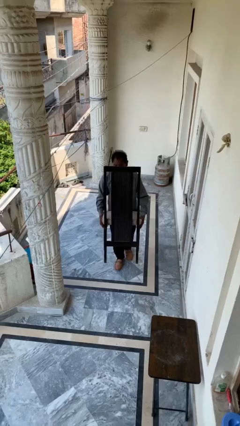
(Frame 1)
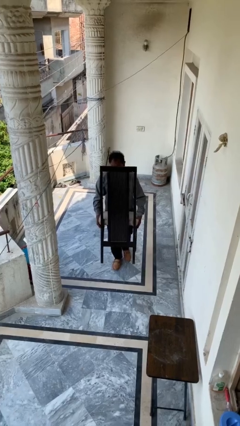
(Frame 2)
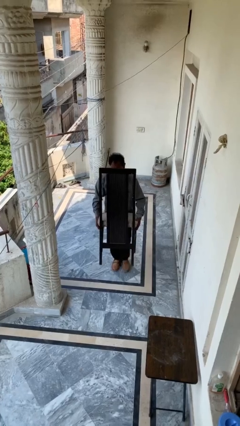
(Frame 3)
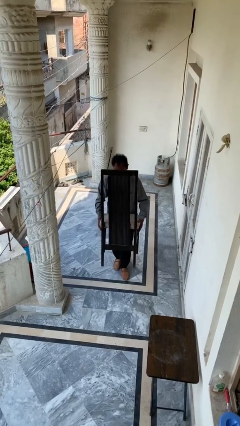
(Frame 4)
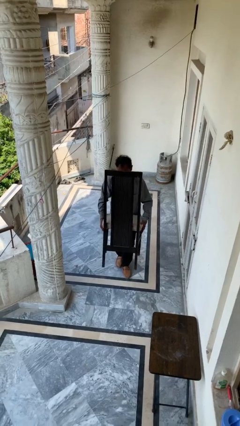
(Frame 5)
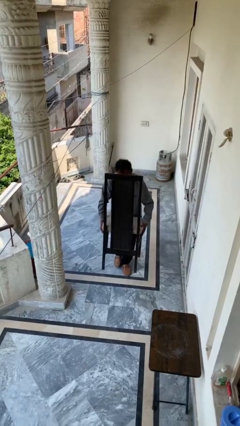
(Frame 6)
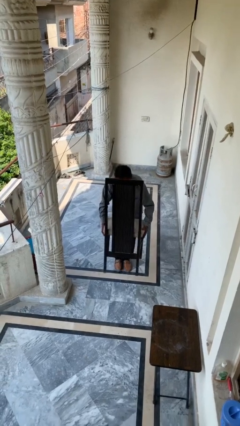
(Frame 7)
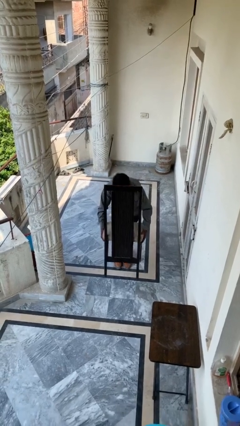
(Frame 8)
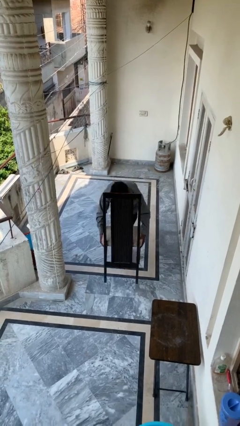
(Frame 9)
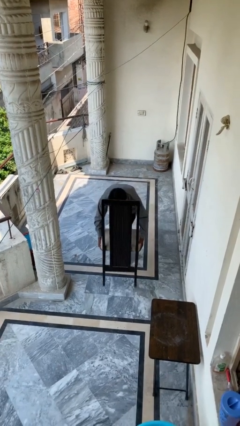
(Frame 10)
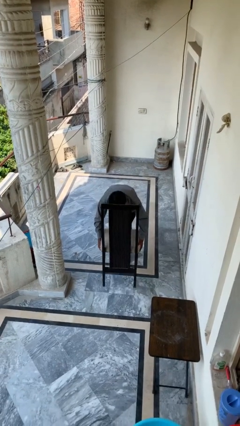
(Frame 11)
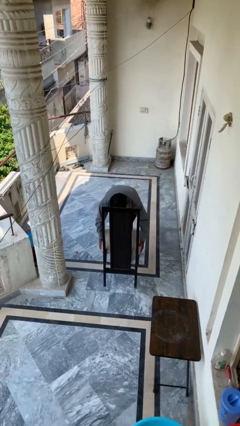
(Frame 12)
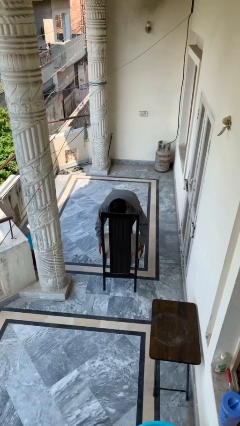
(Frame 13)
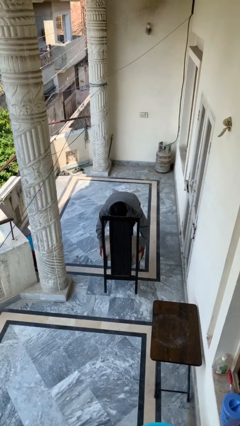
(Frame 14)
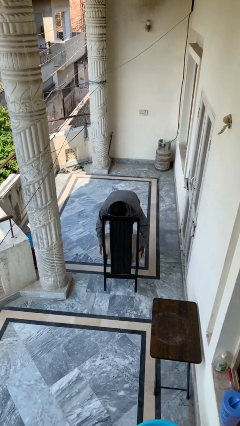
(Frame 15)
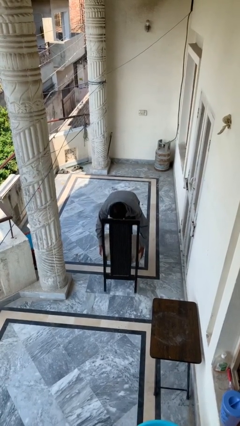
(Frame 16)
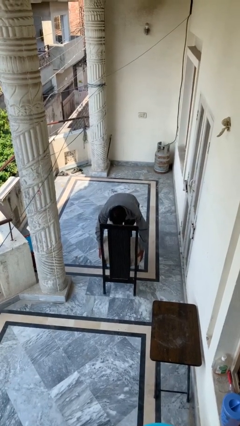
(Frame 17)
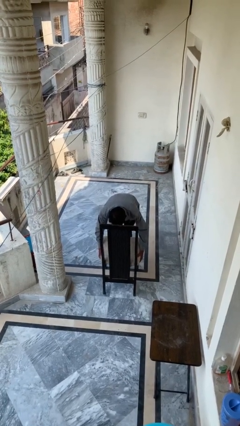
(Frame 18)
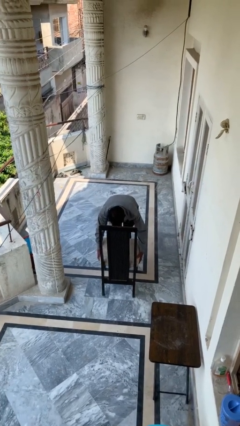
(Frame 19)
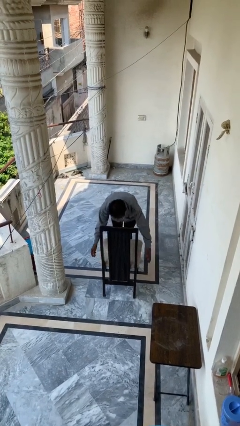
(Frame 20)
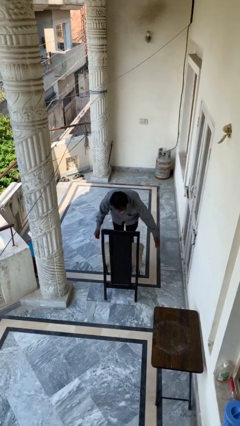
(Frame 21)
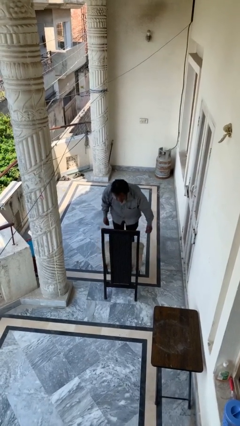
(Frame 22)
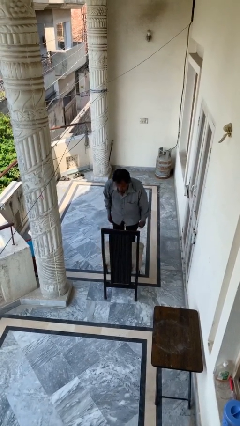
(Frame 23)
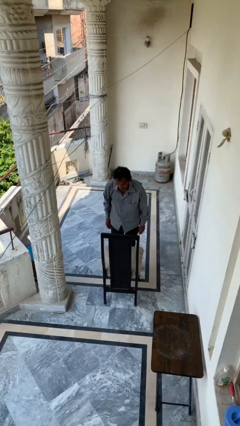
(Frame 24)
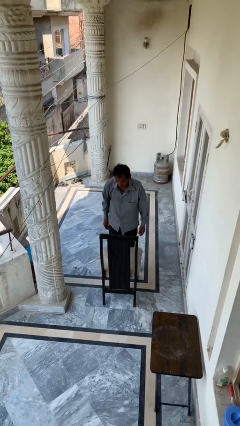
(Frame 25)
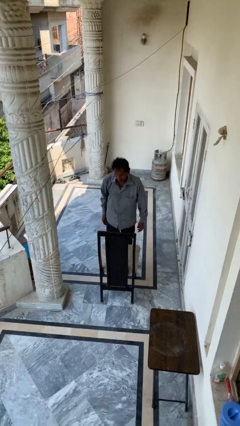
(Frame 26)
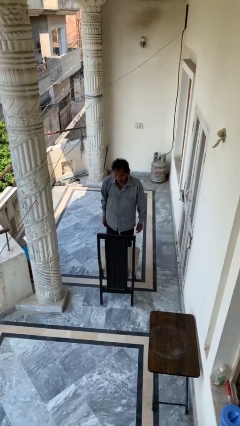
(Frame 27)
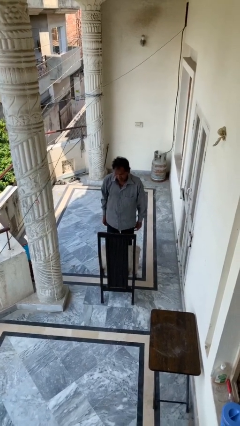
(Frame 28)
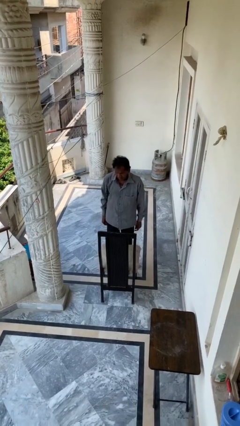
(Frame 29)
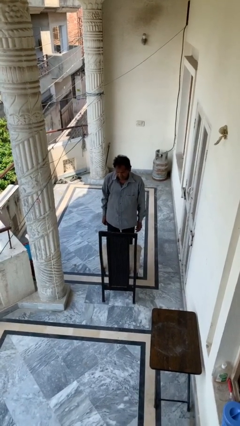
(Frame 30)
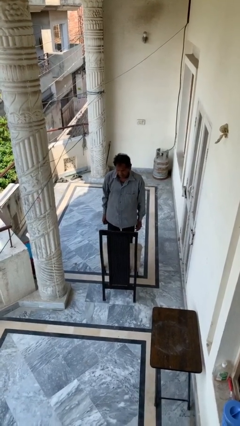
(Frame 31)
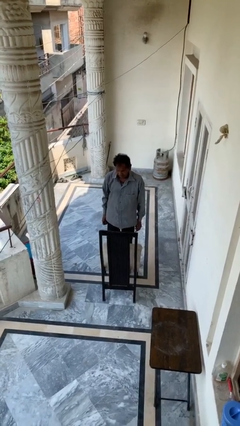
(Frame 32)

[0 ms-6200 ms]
person puts down object on floor

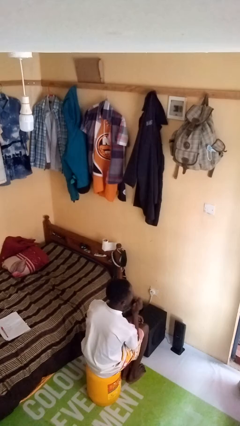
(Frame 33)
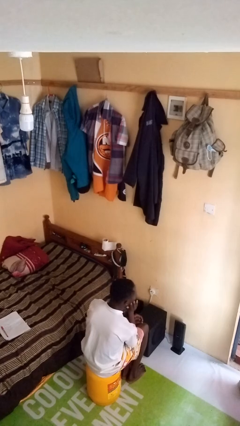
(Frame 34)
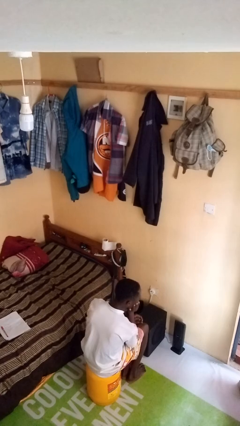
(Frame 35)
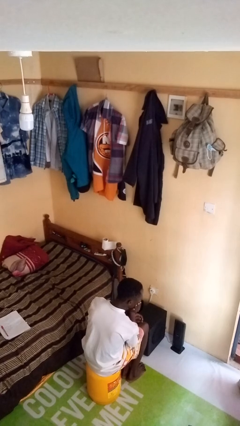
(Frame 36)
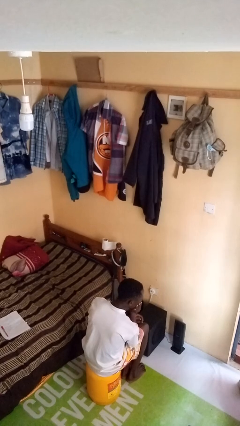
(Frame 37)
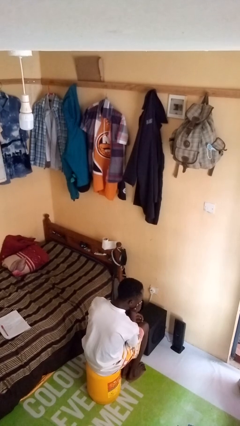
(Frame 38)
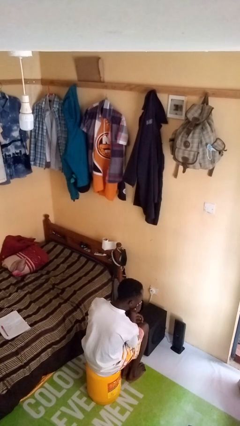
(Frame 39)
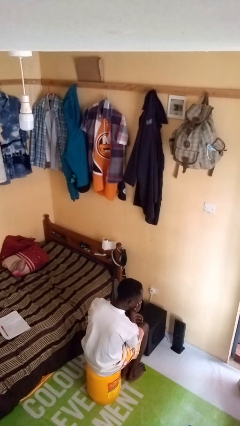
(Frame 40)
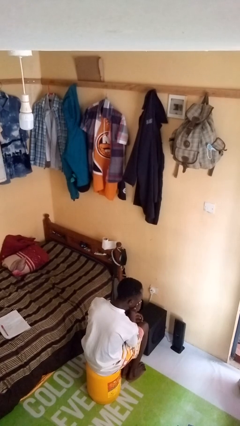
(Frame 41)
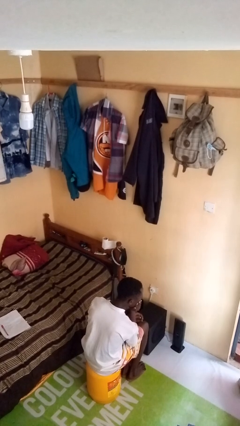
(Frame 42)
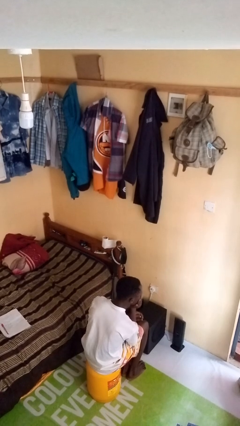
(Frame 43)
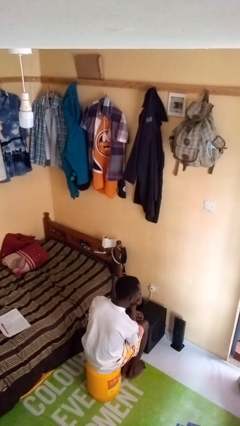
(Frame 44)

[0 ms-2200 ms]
person strokes chin

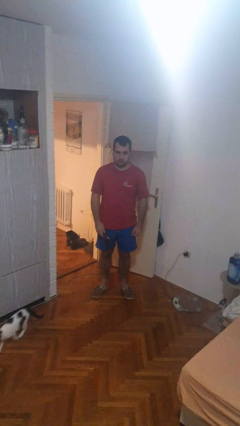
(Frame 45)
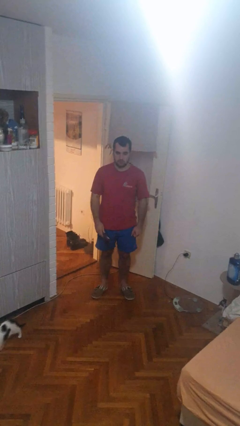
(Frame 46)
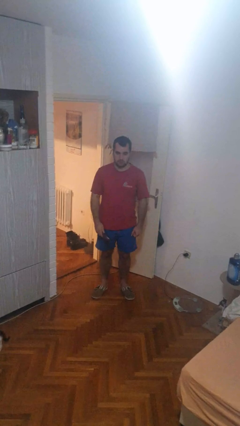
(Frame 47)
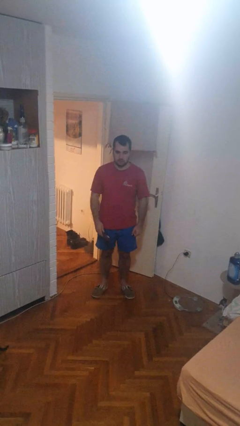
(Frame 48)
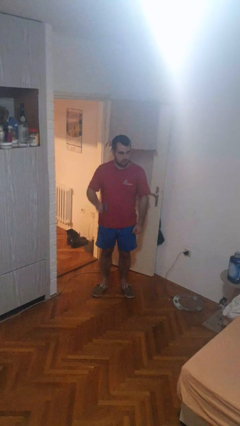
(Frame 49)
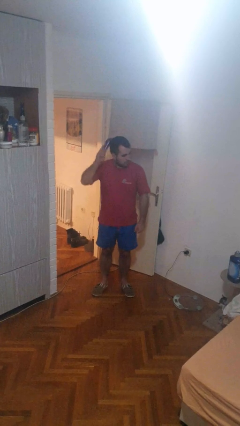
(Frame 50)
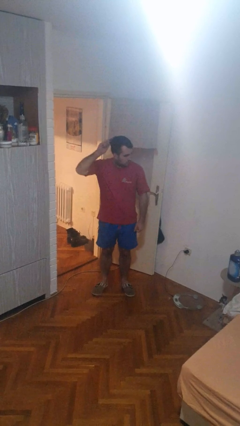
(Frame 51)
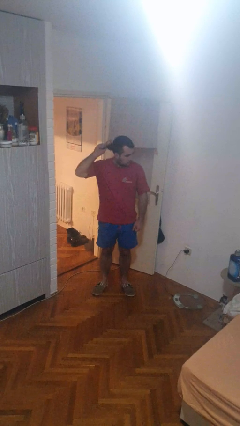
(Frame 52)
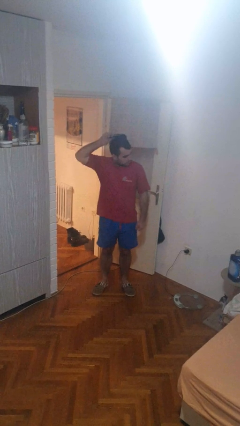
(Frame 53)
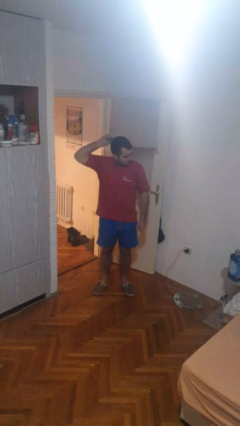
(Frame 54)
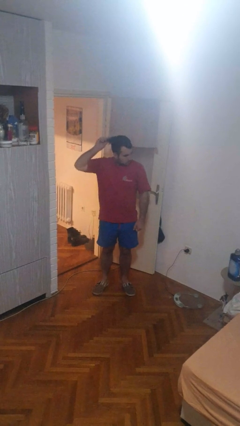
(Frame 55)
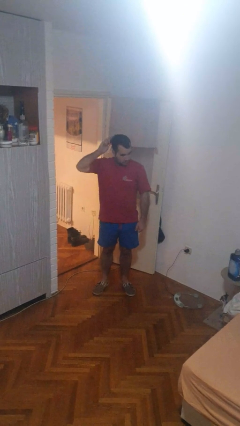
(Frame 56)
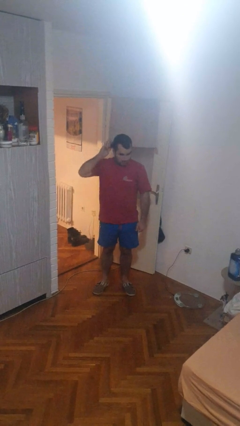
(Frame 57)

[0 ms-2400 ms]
person brushes hair

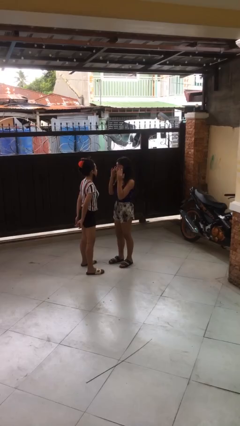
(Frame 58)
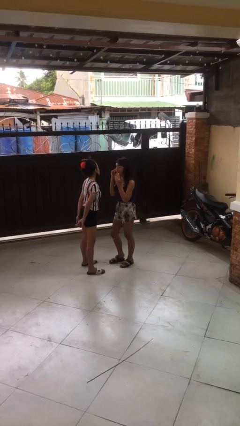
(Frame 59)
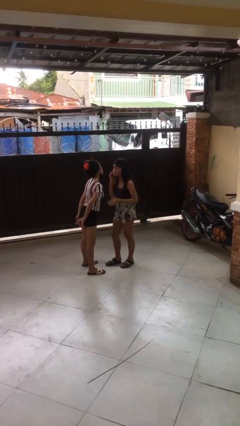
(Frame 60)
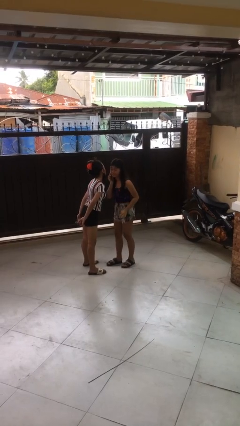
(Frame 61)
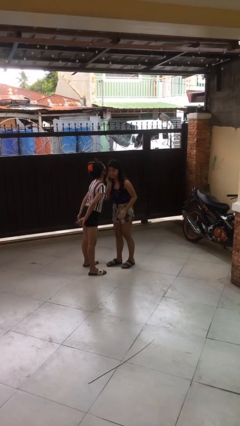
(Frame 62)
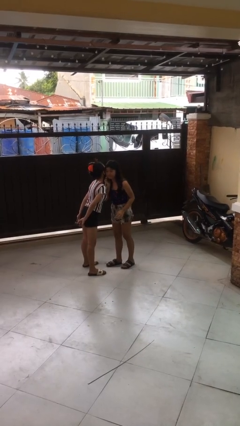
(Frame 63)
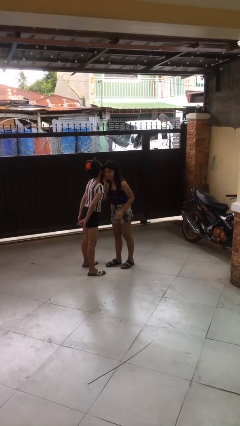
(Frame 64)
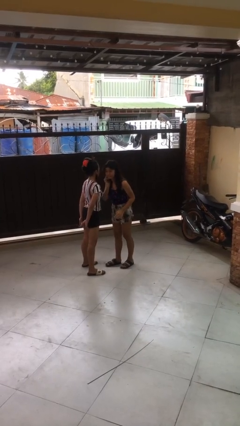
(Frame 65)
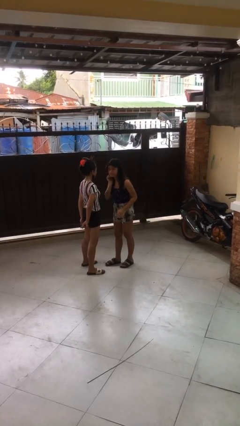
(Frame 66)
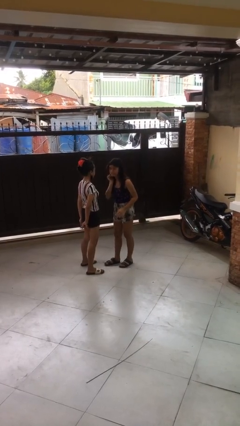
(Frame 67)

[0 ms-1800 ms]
person kisses cheek of person

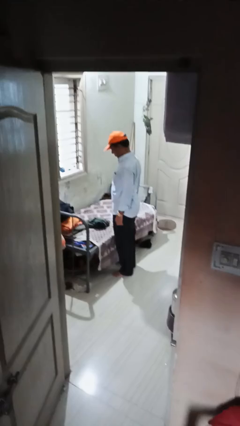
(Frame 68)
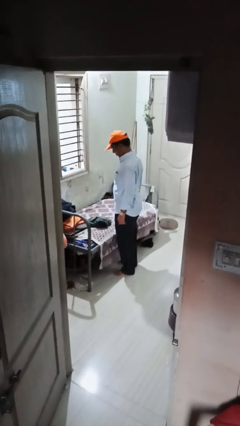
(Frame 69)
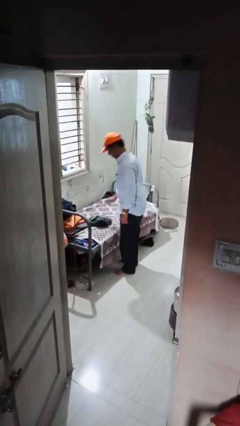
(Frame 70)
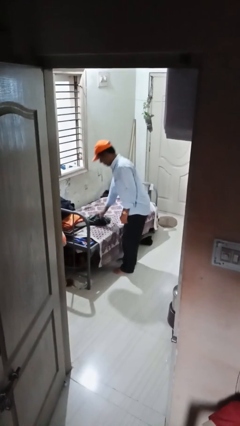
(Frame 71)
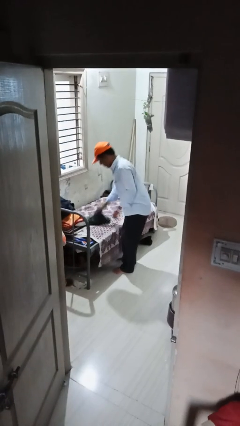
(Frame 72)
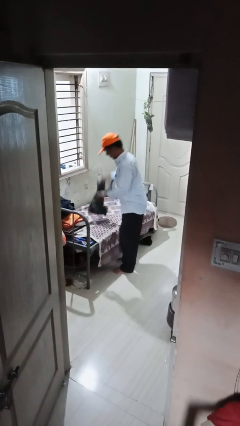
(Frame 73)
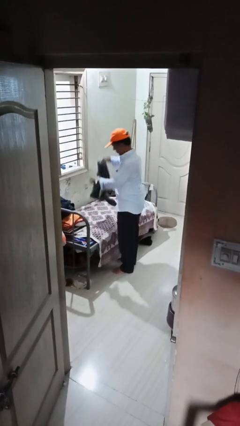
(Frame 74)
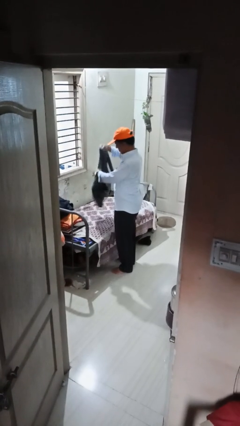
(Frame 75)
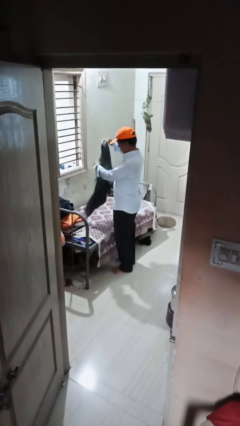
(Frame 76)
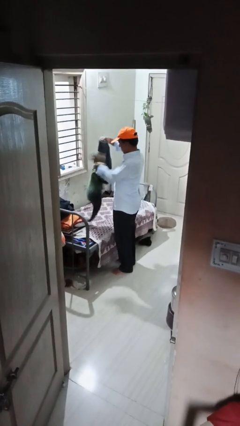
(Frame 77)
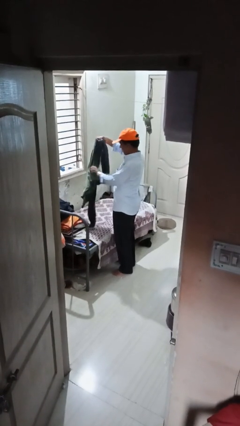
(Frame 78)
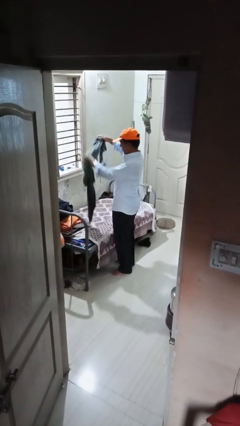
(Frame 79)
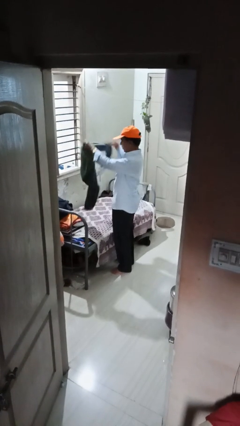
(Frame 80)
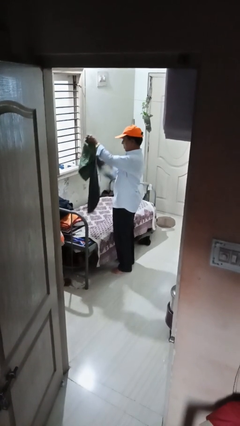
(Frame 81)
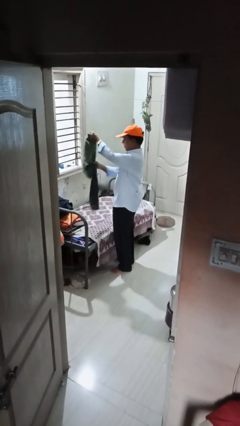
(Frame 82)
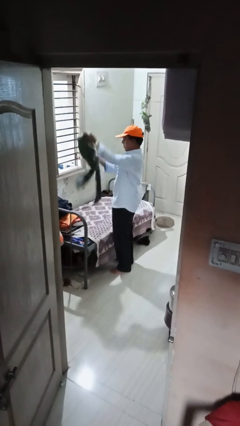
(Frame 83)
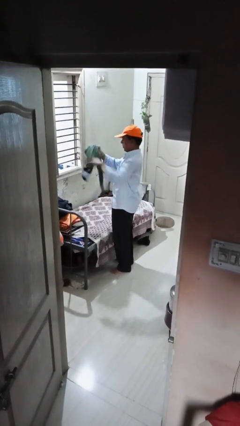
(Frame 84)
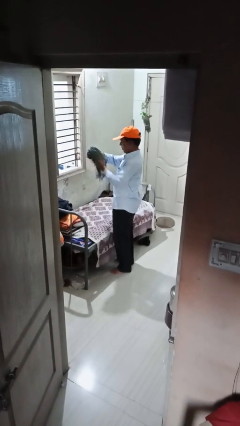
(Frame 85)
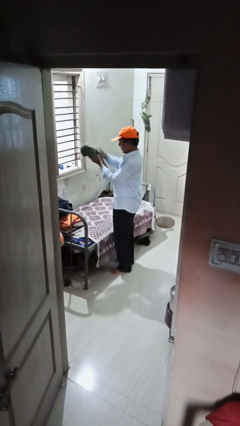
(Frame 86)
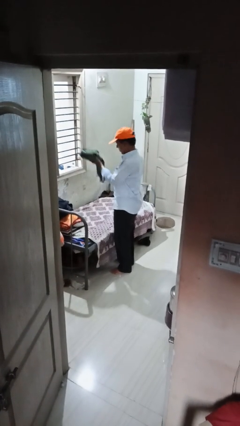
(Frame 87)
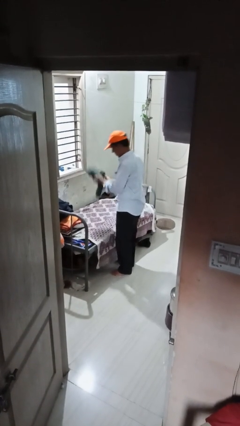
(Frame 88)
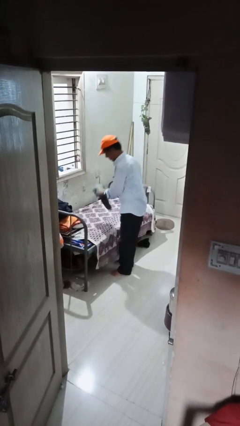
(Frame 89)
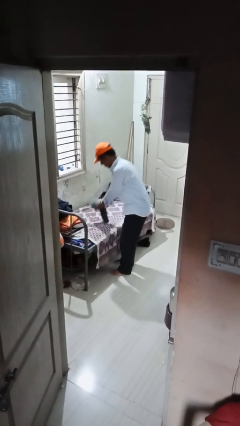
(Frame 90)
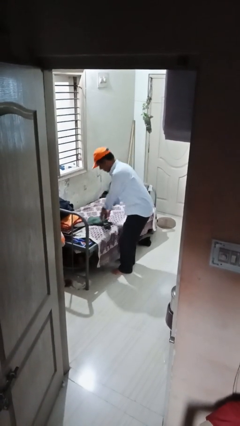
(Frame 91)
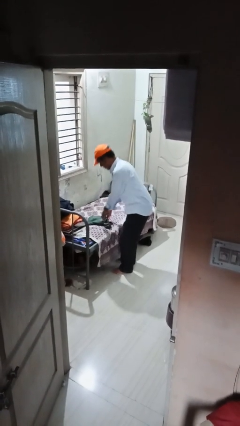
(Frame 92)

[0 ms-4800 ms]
person folds shirt
